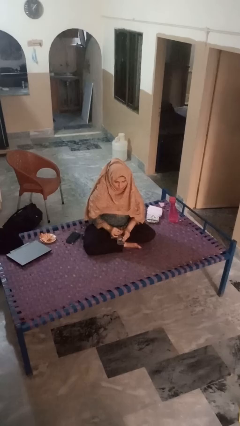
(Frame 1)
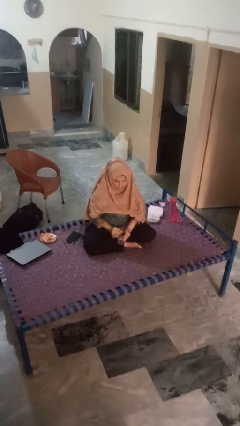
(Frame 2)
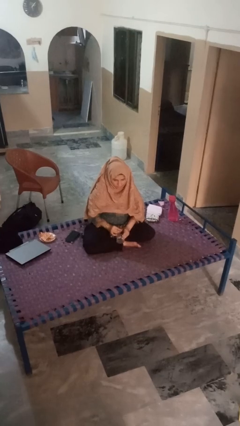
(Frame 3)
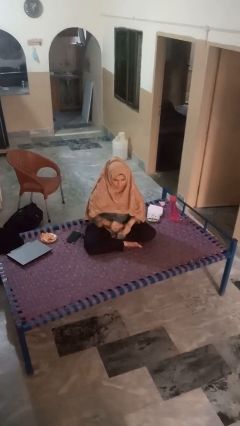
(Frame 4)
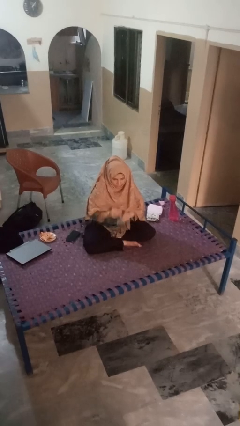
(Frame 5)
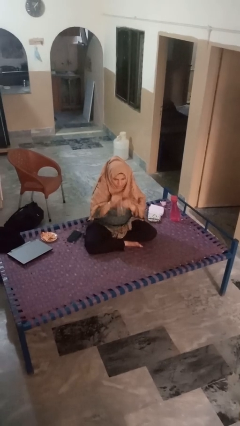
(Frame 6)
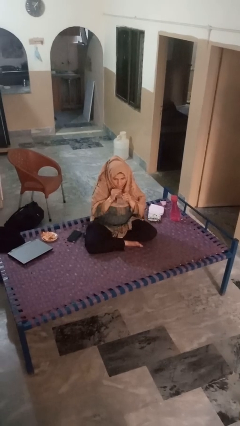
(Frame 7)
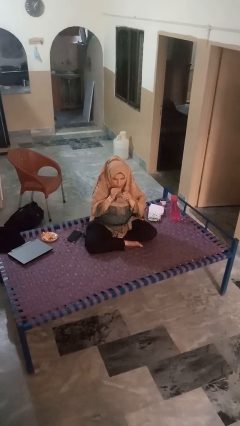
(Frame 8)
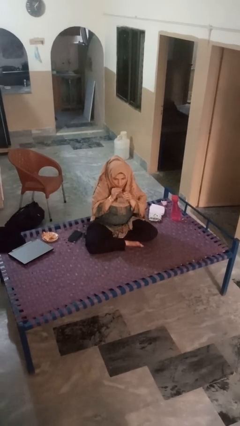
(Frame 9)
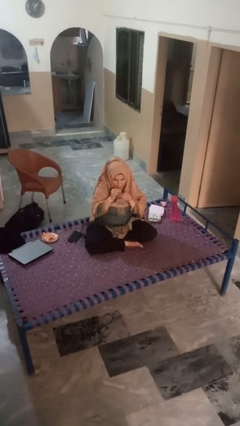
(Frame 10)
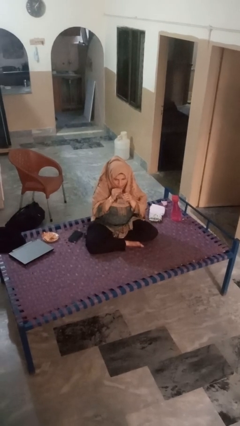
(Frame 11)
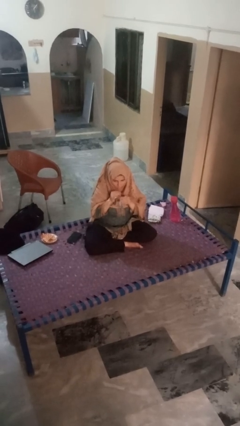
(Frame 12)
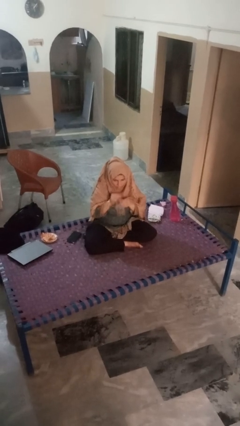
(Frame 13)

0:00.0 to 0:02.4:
person drinks from straw

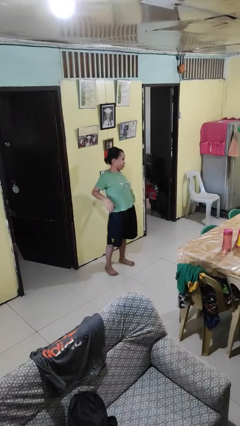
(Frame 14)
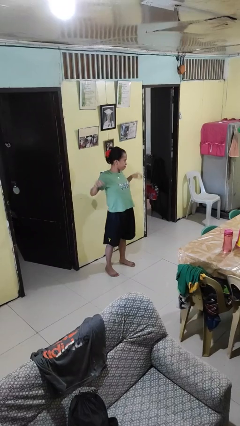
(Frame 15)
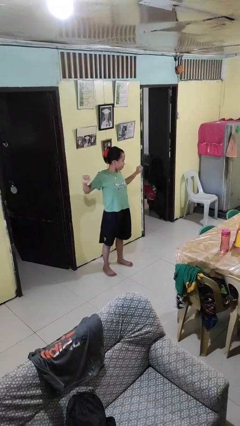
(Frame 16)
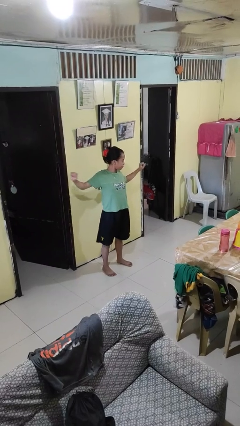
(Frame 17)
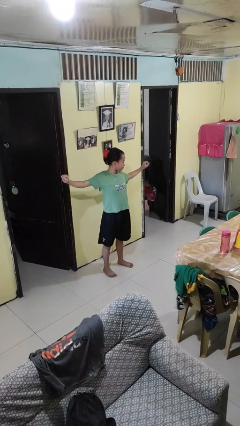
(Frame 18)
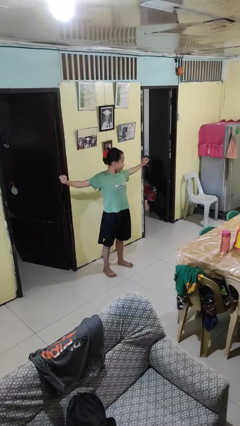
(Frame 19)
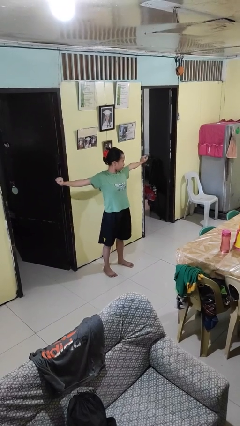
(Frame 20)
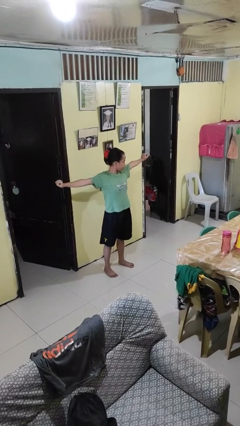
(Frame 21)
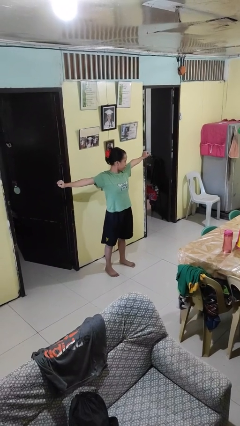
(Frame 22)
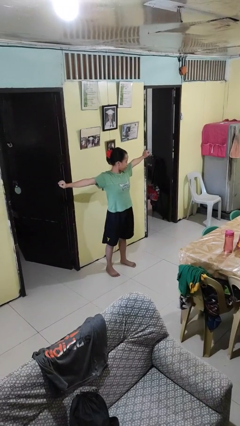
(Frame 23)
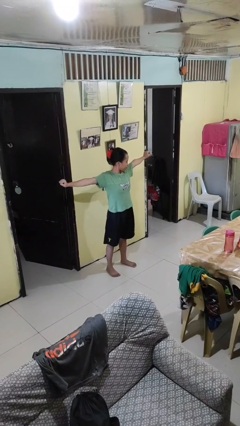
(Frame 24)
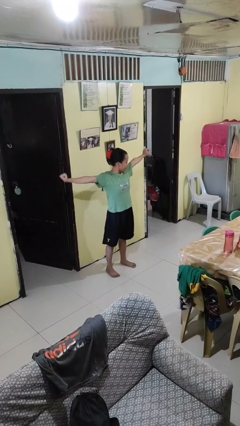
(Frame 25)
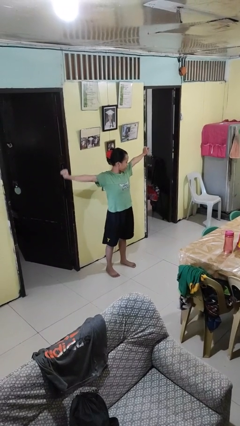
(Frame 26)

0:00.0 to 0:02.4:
person stretches arms to side

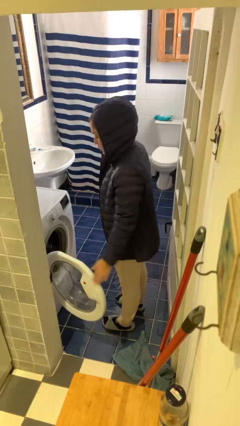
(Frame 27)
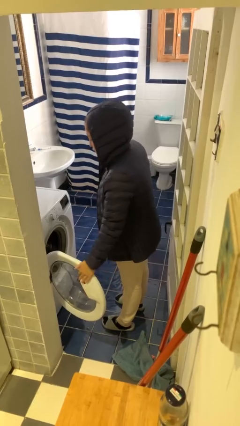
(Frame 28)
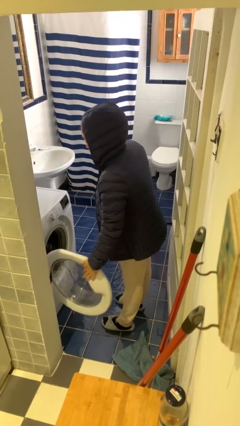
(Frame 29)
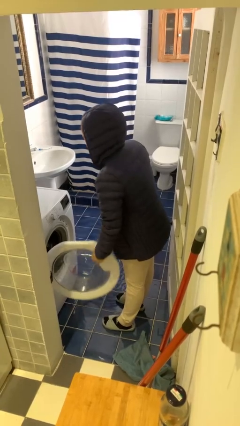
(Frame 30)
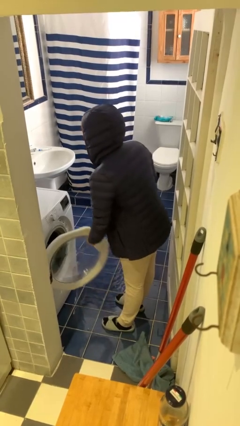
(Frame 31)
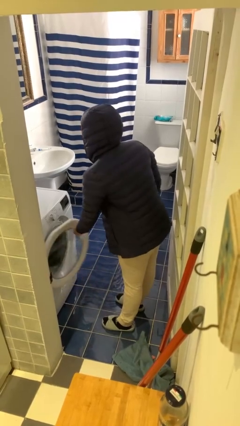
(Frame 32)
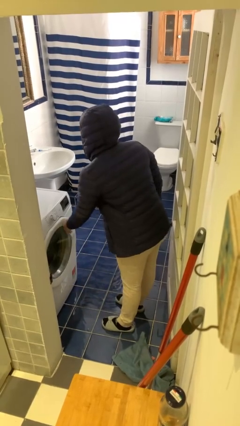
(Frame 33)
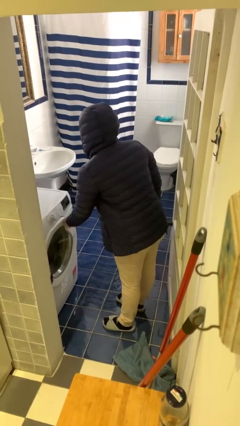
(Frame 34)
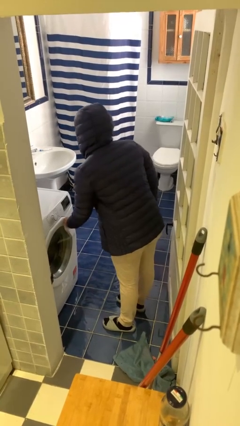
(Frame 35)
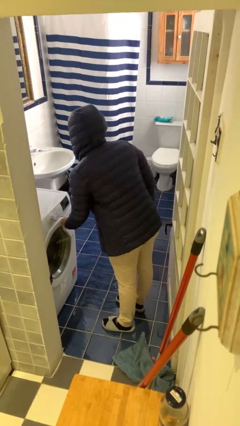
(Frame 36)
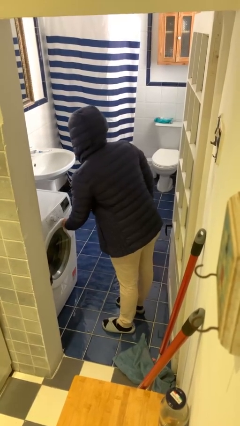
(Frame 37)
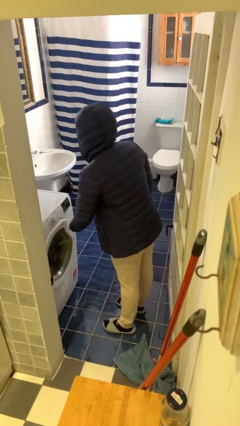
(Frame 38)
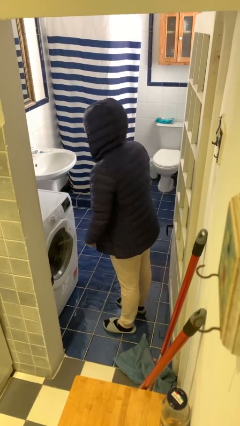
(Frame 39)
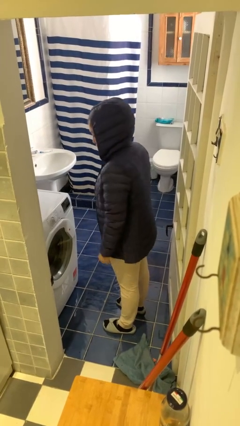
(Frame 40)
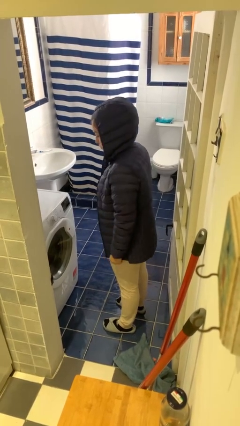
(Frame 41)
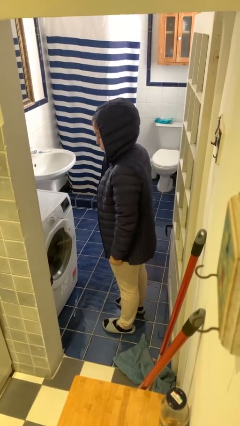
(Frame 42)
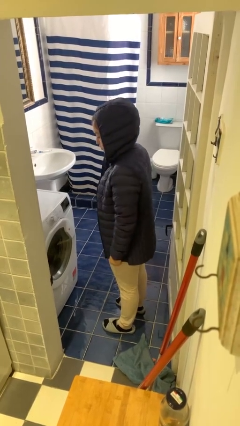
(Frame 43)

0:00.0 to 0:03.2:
person closes clothes washer

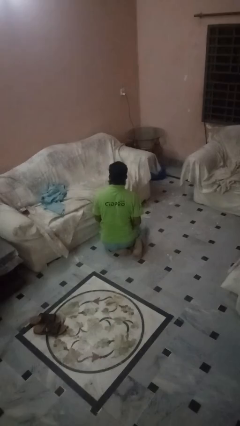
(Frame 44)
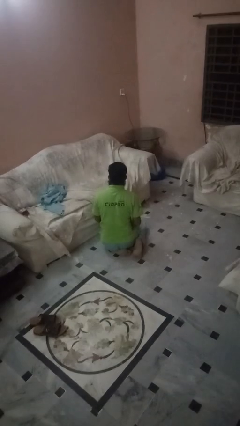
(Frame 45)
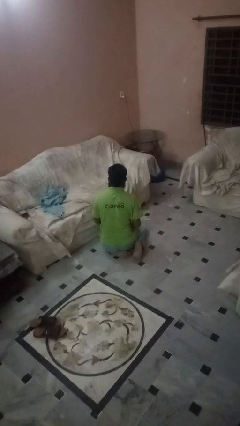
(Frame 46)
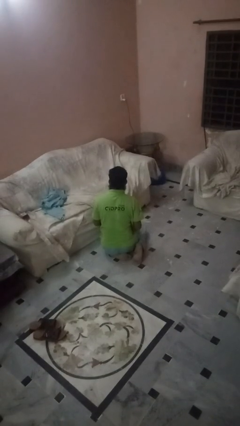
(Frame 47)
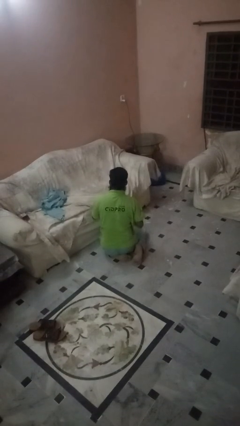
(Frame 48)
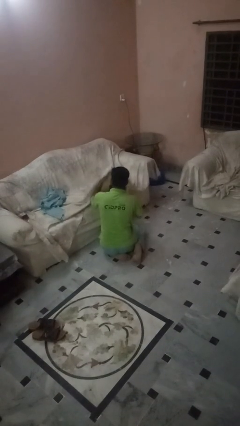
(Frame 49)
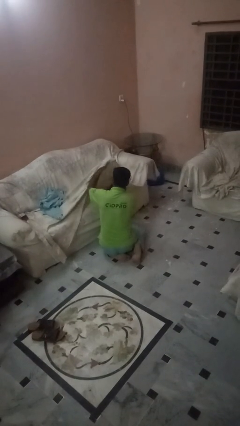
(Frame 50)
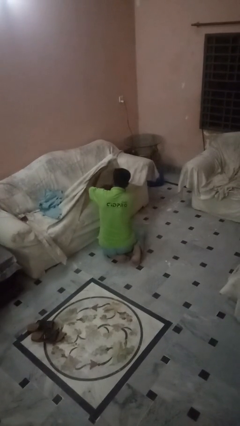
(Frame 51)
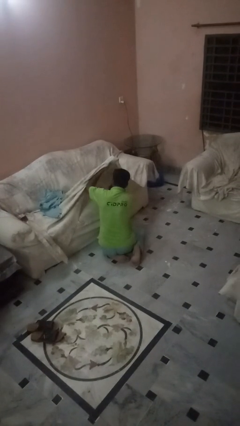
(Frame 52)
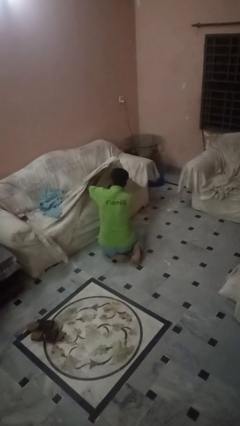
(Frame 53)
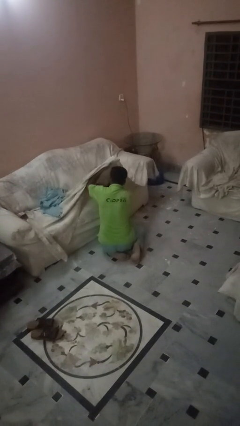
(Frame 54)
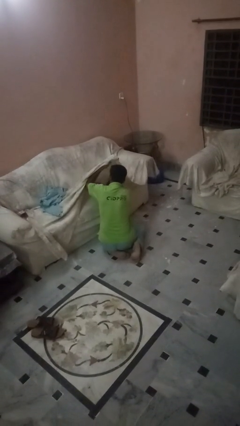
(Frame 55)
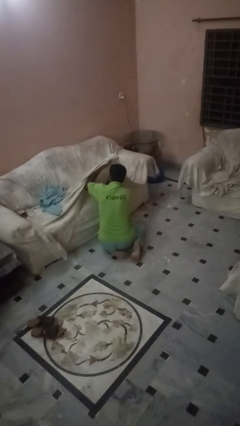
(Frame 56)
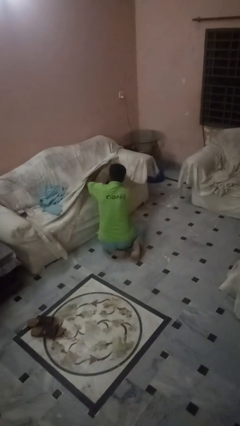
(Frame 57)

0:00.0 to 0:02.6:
person searches in couch

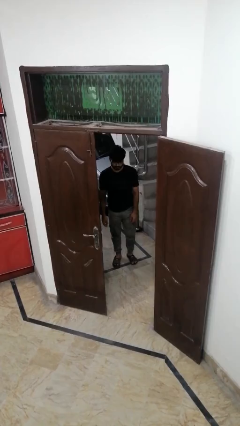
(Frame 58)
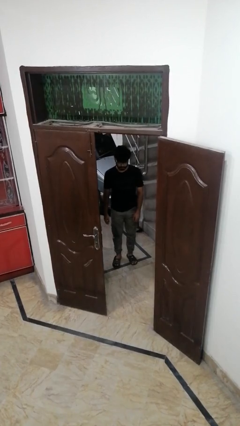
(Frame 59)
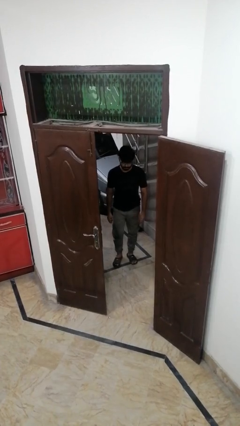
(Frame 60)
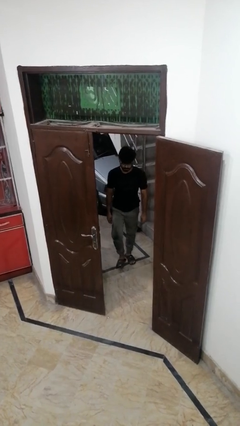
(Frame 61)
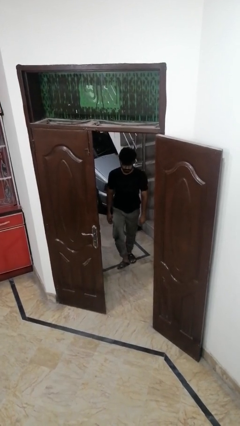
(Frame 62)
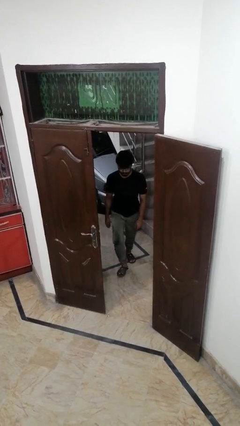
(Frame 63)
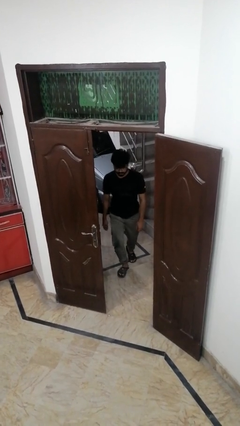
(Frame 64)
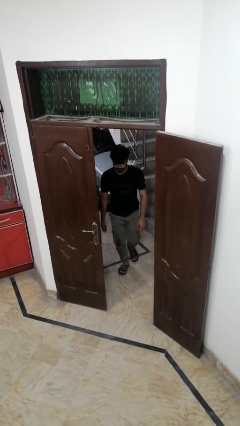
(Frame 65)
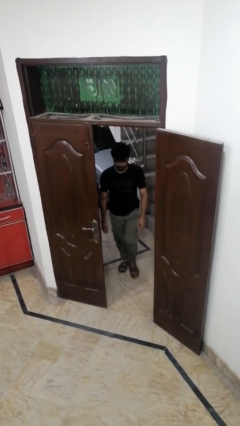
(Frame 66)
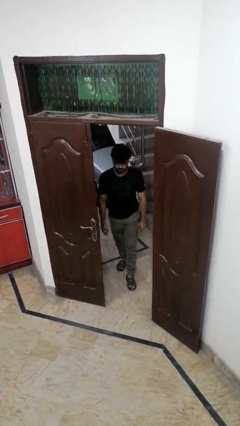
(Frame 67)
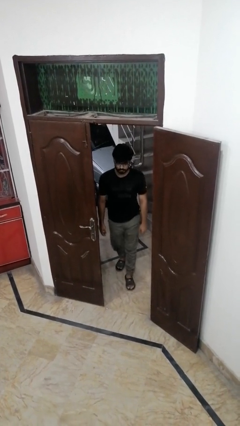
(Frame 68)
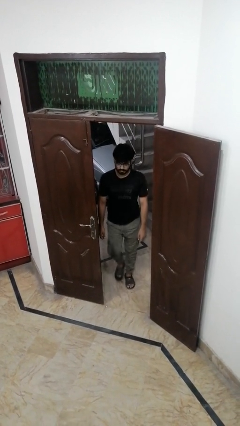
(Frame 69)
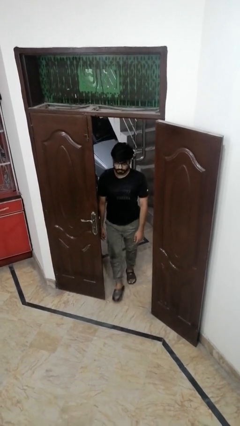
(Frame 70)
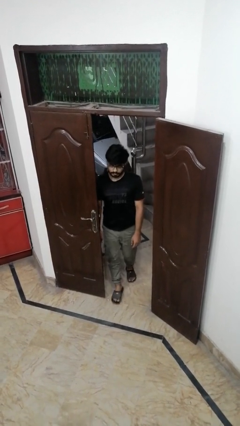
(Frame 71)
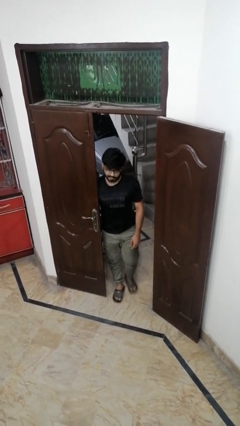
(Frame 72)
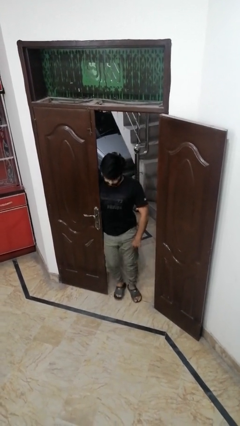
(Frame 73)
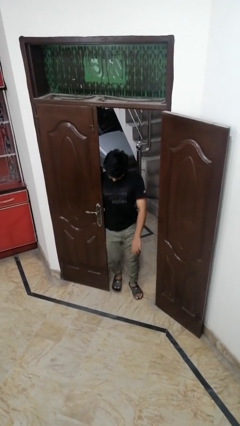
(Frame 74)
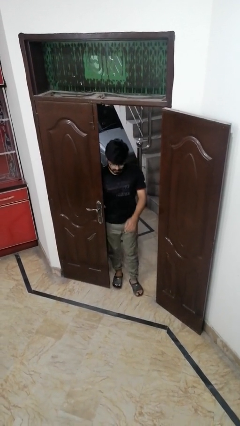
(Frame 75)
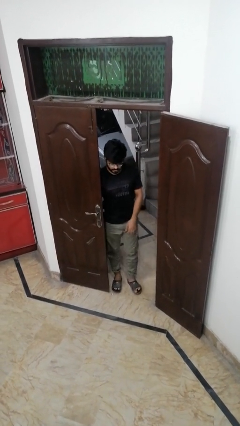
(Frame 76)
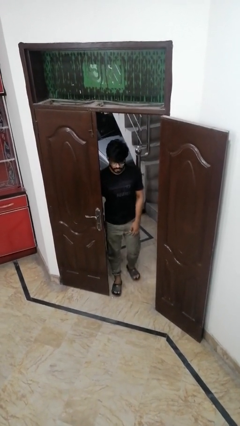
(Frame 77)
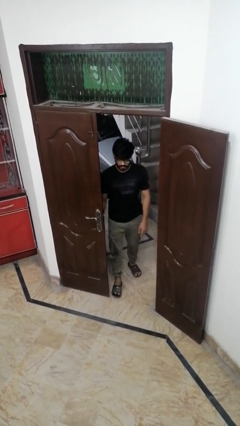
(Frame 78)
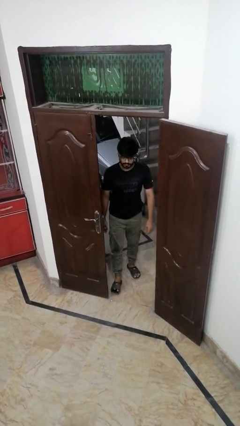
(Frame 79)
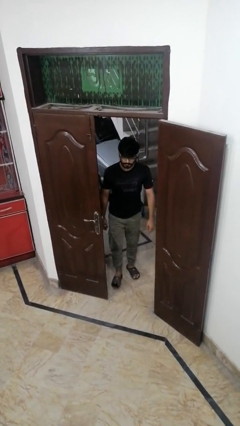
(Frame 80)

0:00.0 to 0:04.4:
person bumps into wall

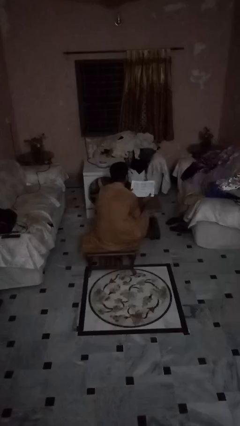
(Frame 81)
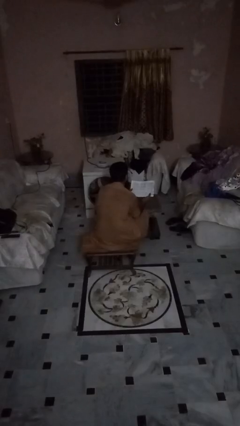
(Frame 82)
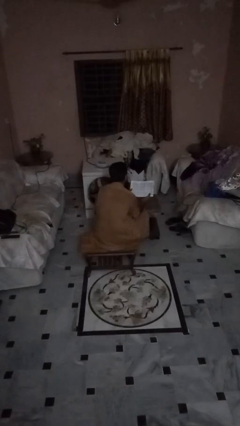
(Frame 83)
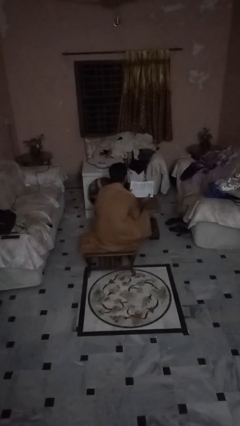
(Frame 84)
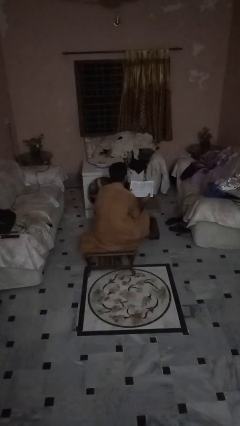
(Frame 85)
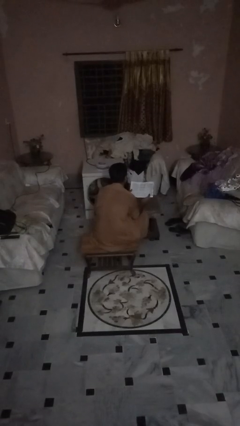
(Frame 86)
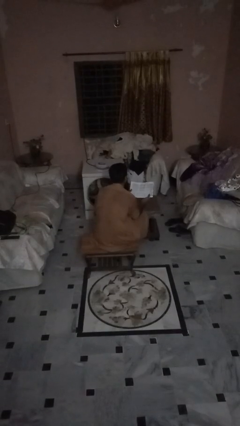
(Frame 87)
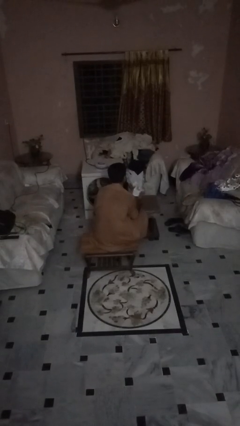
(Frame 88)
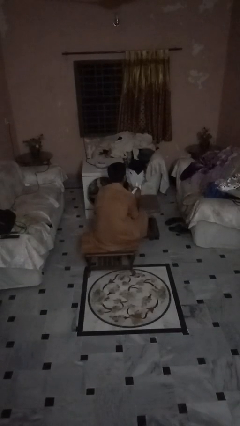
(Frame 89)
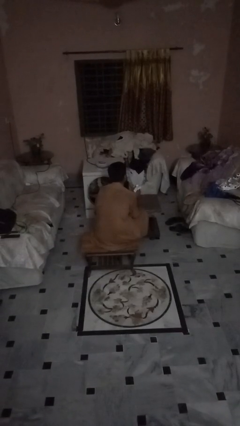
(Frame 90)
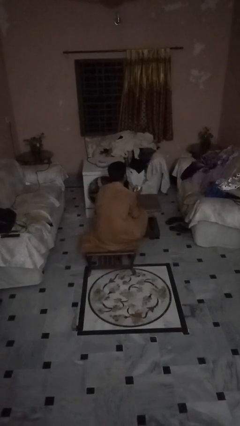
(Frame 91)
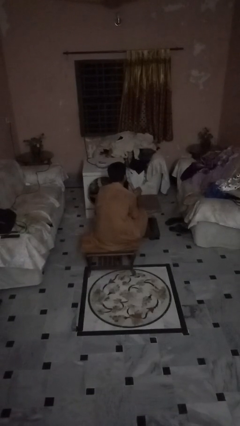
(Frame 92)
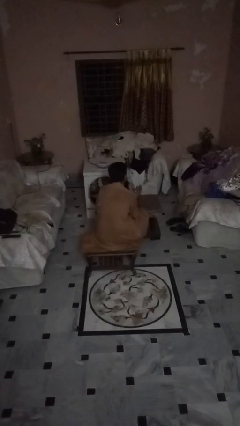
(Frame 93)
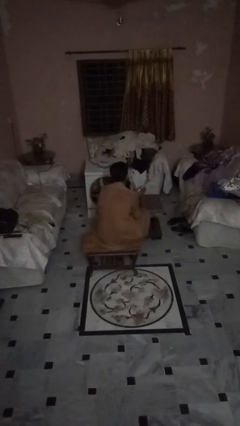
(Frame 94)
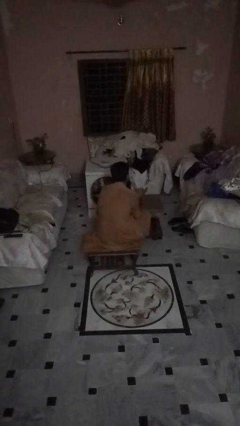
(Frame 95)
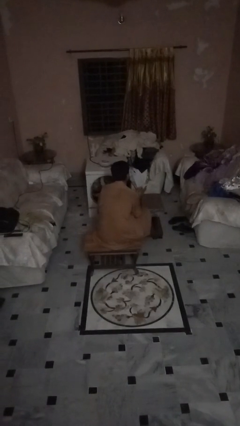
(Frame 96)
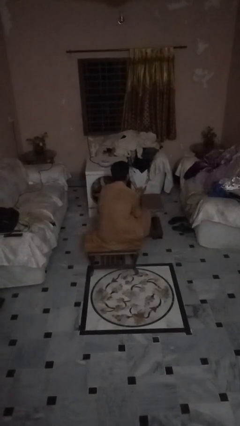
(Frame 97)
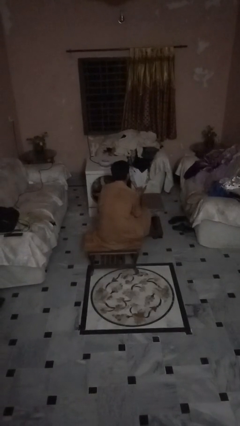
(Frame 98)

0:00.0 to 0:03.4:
person crumples paper
